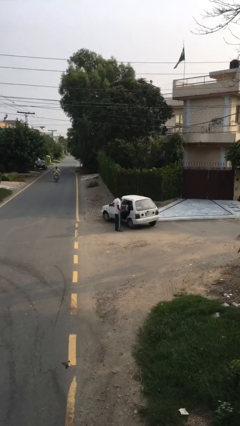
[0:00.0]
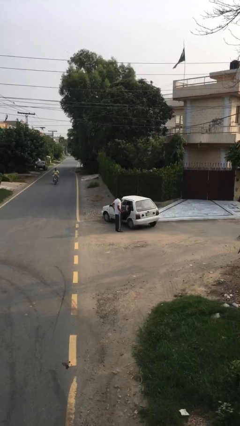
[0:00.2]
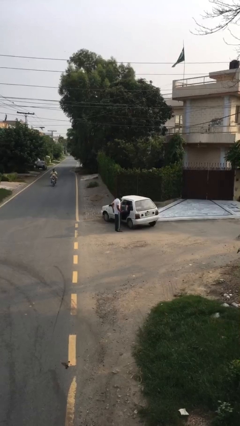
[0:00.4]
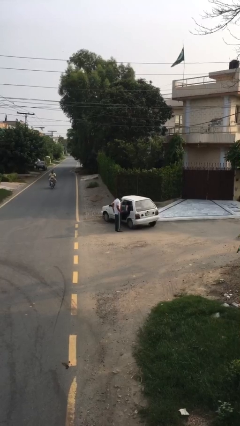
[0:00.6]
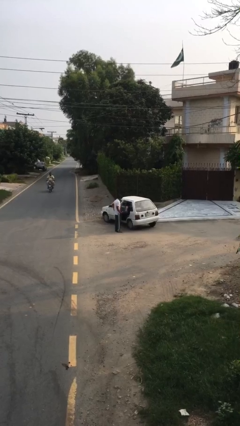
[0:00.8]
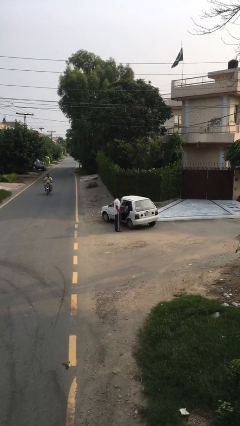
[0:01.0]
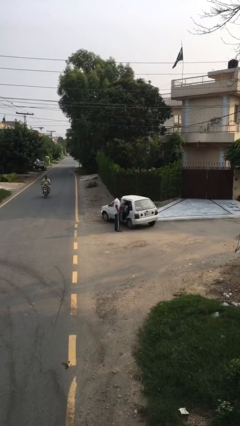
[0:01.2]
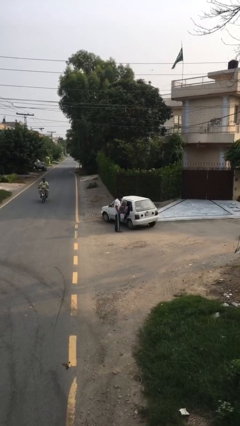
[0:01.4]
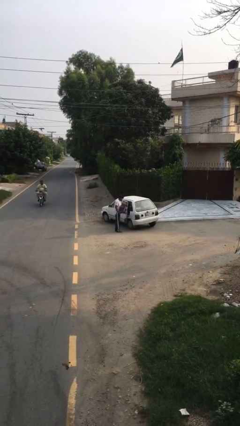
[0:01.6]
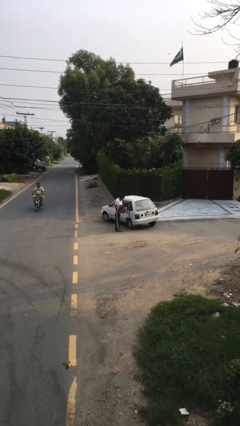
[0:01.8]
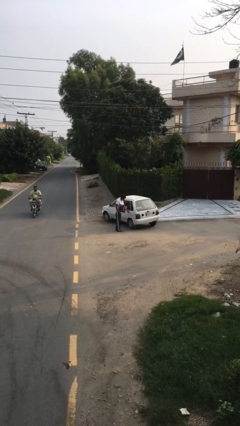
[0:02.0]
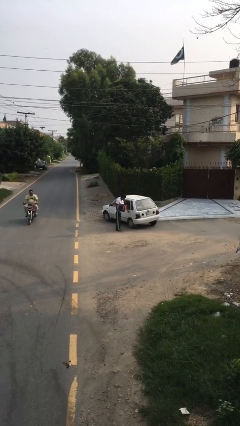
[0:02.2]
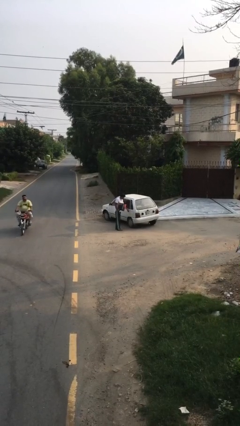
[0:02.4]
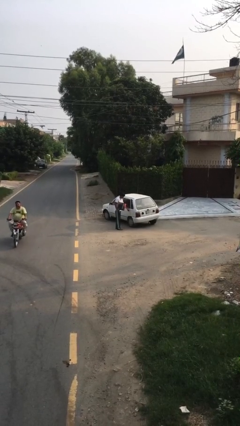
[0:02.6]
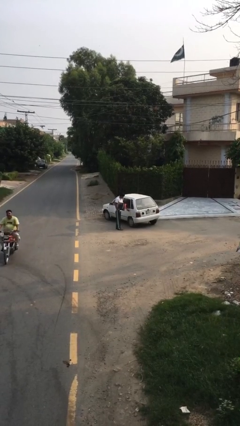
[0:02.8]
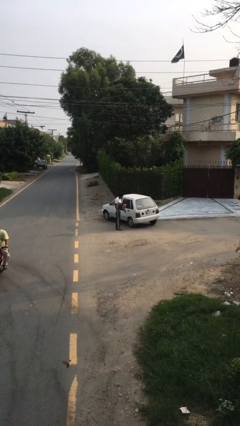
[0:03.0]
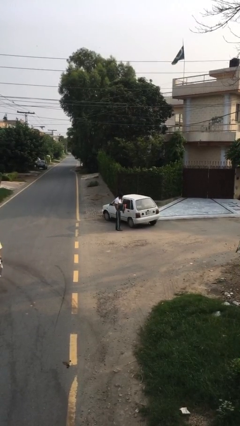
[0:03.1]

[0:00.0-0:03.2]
person closes car door

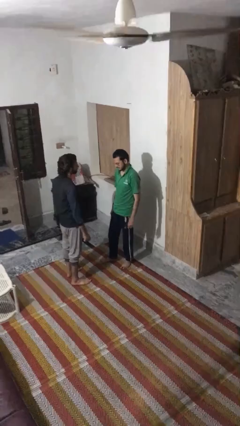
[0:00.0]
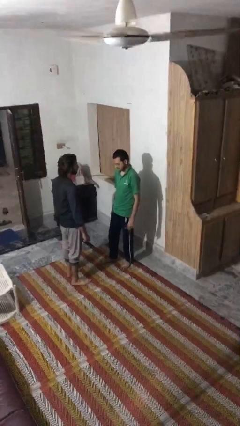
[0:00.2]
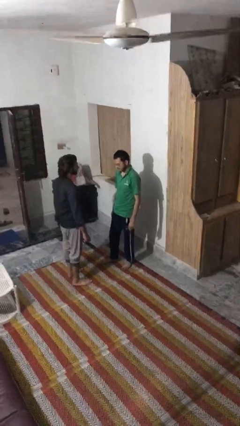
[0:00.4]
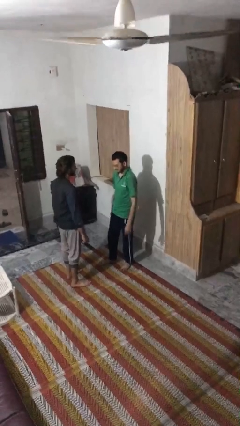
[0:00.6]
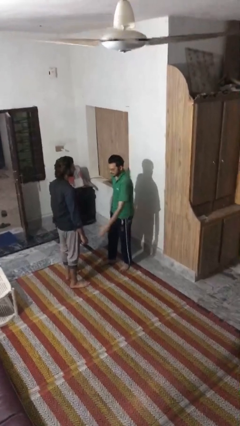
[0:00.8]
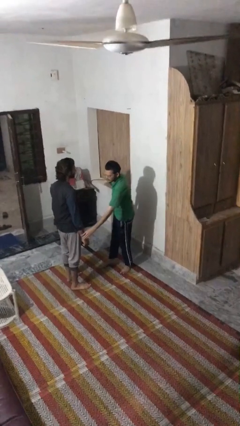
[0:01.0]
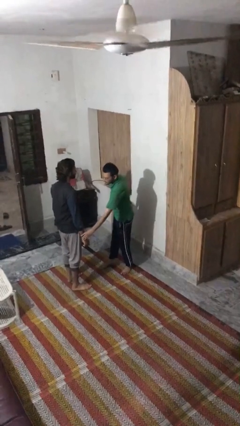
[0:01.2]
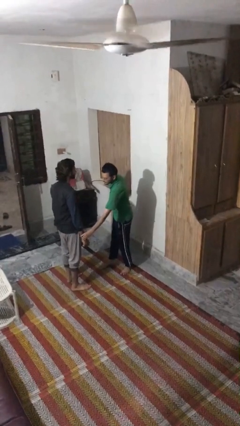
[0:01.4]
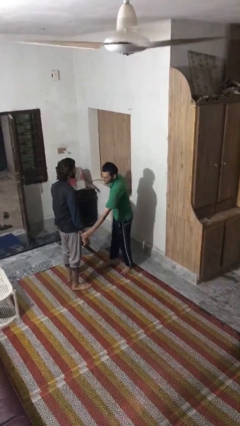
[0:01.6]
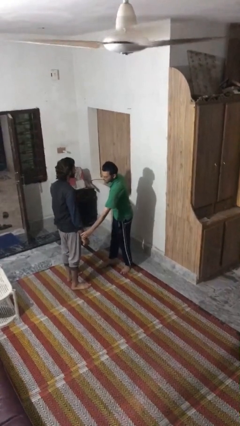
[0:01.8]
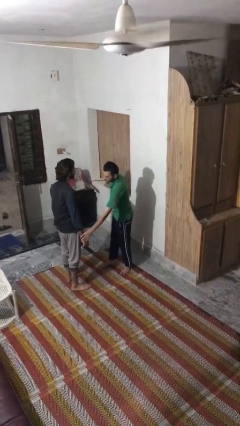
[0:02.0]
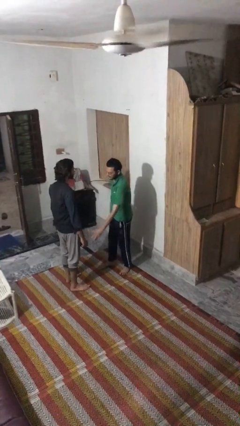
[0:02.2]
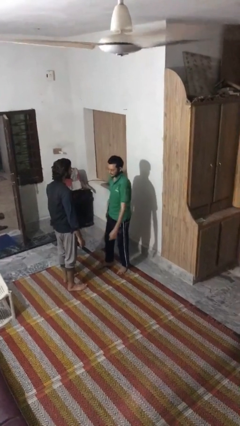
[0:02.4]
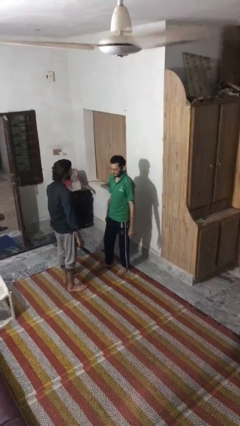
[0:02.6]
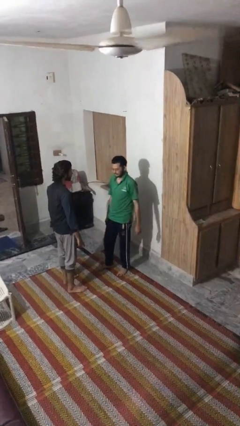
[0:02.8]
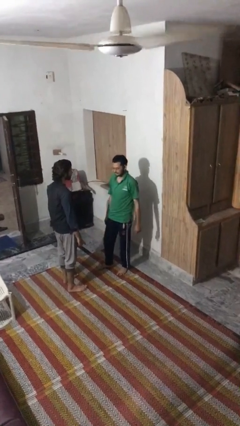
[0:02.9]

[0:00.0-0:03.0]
person grabs person by forearm

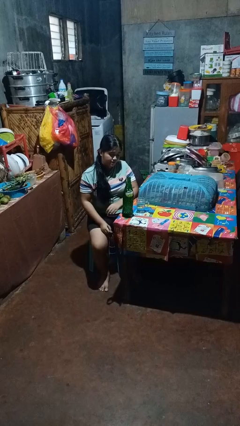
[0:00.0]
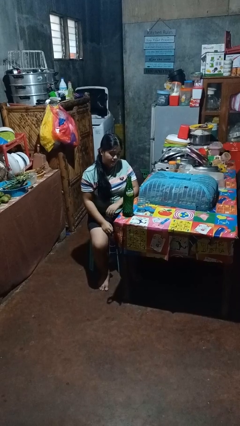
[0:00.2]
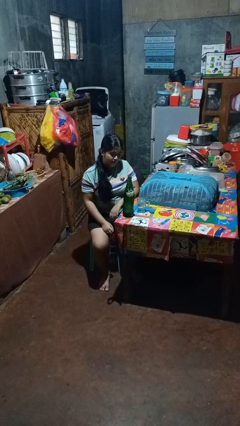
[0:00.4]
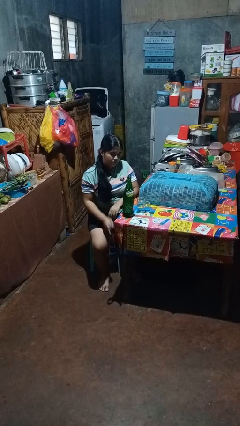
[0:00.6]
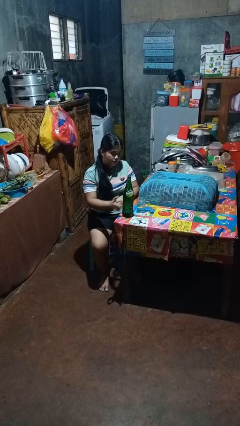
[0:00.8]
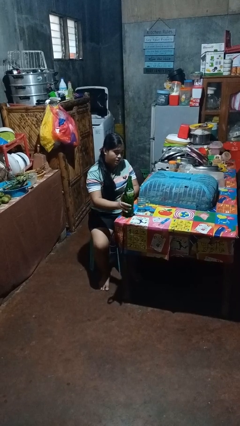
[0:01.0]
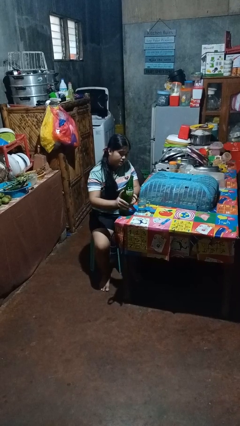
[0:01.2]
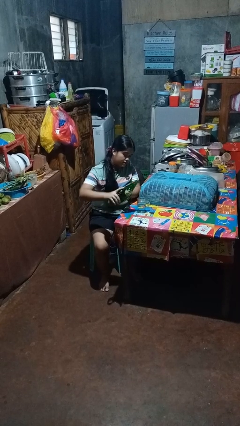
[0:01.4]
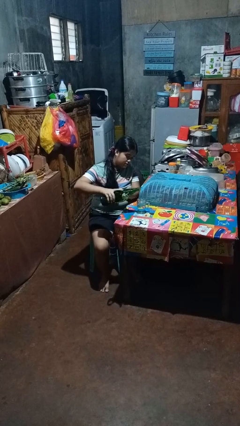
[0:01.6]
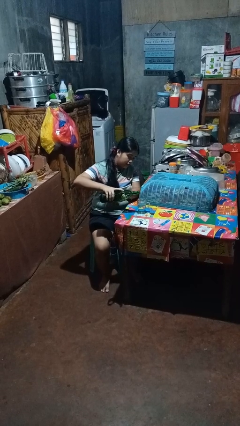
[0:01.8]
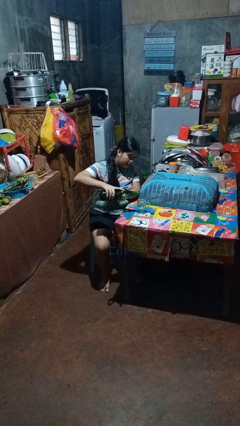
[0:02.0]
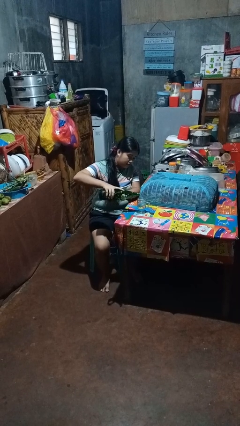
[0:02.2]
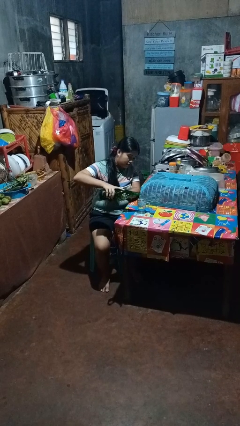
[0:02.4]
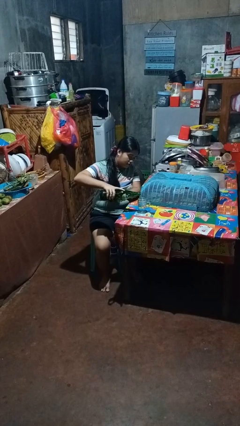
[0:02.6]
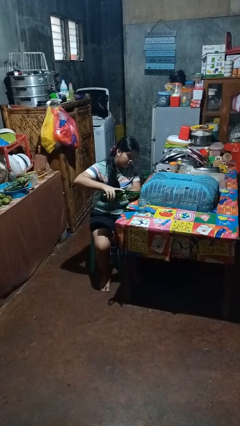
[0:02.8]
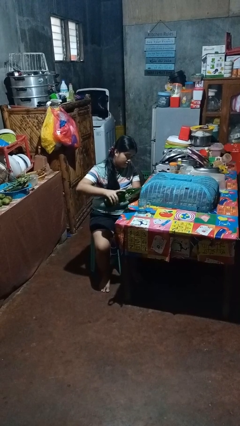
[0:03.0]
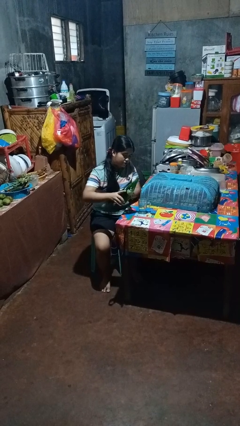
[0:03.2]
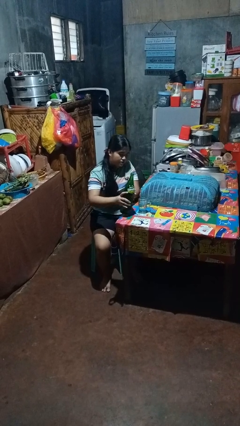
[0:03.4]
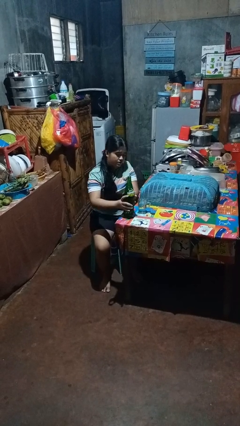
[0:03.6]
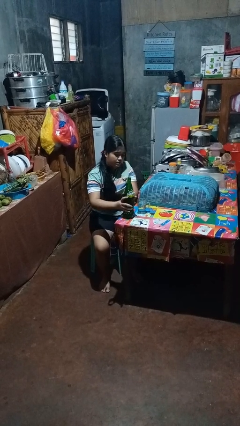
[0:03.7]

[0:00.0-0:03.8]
person pours liquid into cup

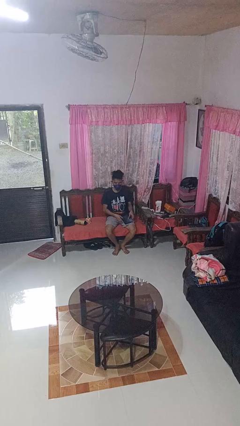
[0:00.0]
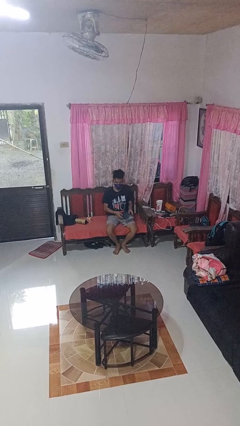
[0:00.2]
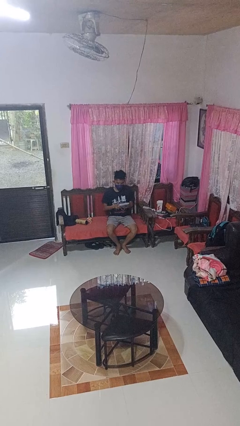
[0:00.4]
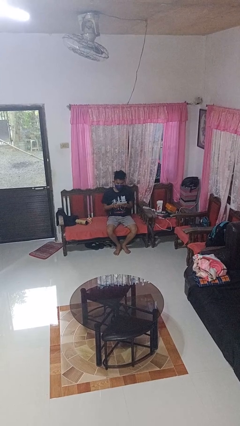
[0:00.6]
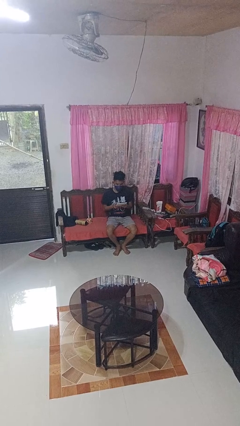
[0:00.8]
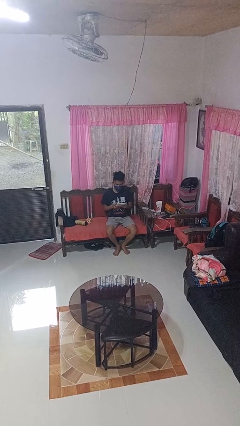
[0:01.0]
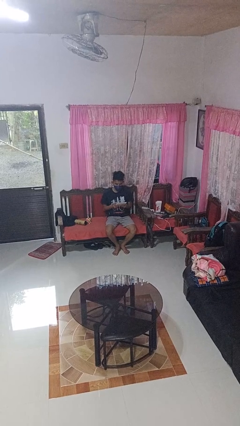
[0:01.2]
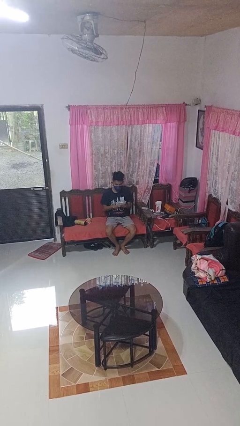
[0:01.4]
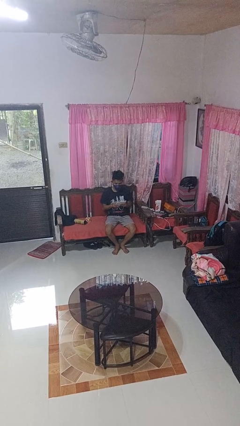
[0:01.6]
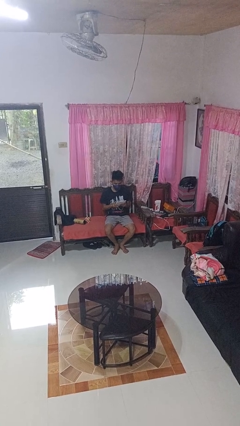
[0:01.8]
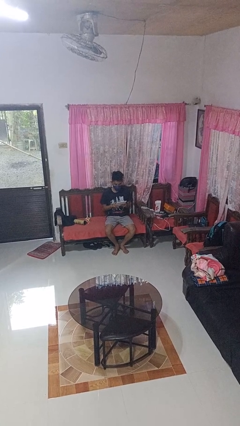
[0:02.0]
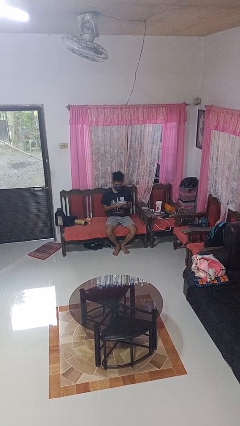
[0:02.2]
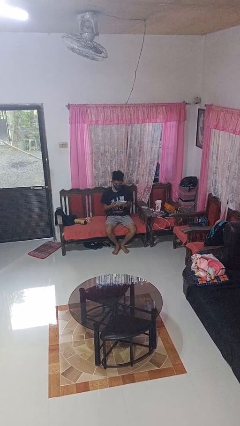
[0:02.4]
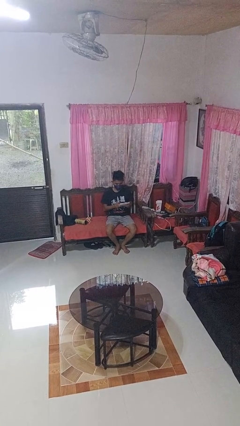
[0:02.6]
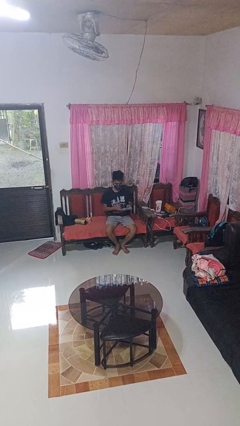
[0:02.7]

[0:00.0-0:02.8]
person interacts with tablet

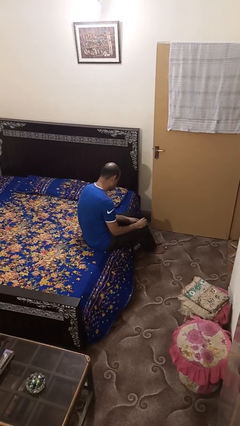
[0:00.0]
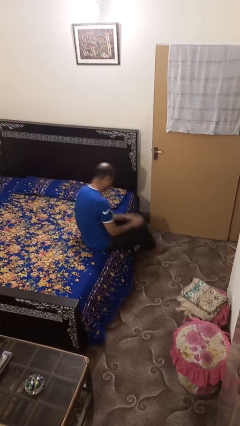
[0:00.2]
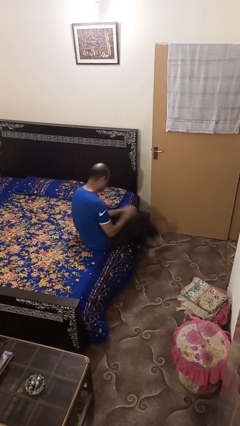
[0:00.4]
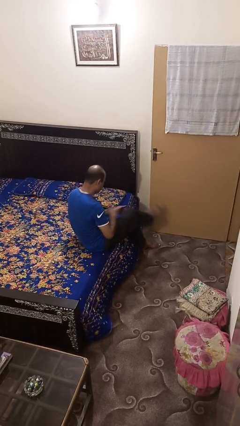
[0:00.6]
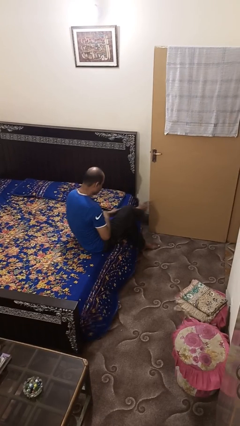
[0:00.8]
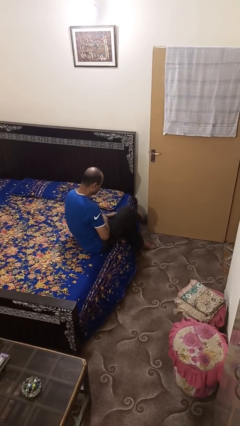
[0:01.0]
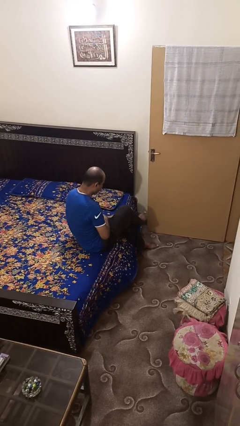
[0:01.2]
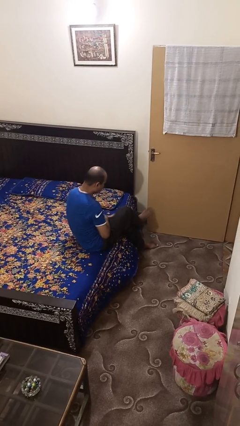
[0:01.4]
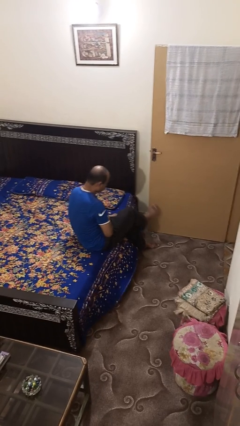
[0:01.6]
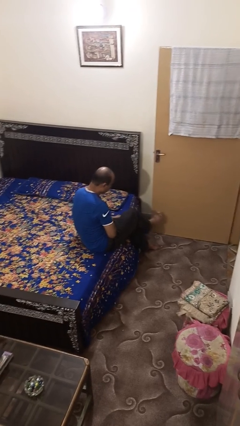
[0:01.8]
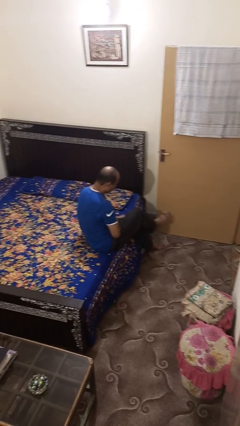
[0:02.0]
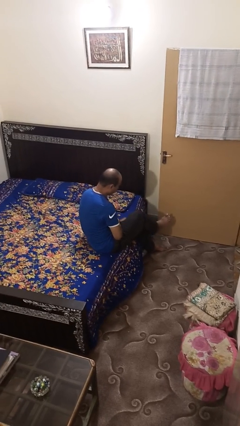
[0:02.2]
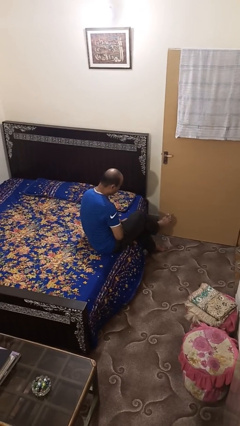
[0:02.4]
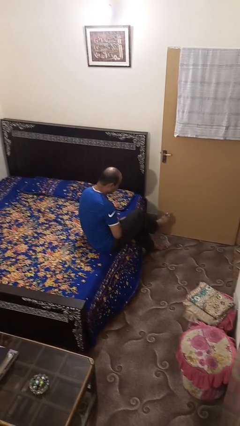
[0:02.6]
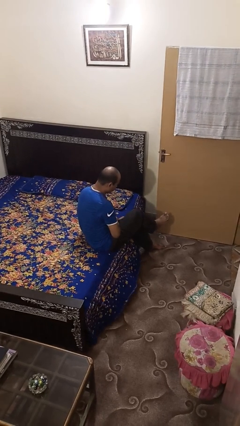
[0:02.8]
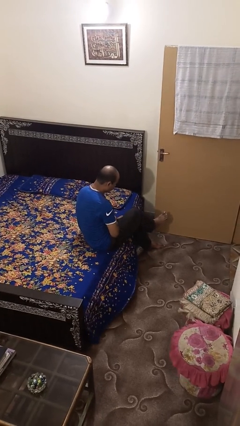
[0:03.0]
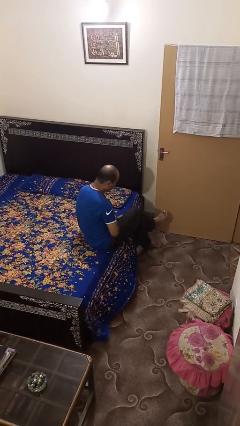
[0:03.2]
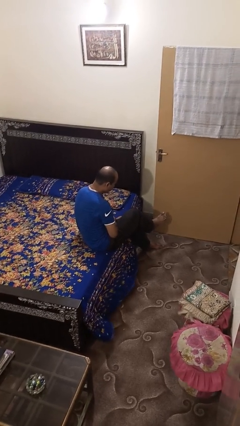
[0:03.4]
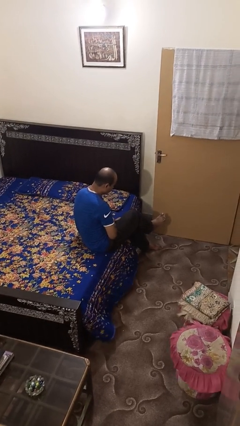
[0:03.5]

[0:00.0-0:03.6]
person crosses legs

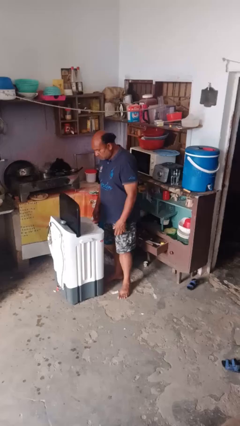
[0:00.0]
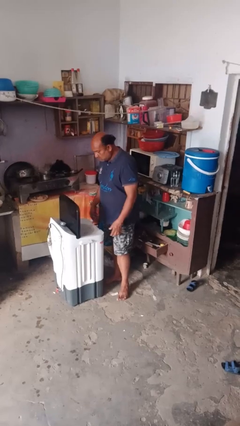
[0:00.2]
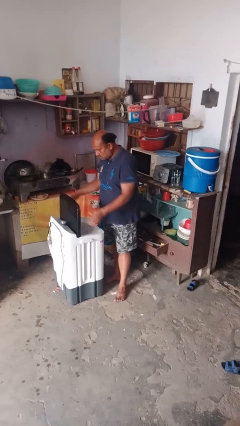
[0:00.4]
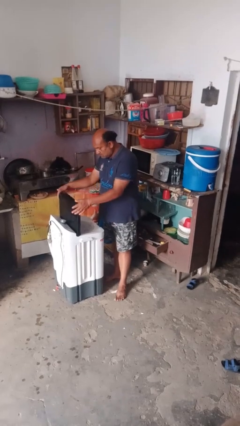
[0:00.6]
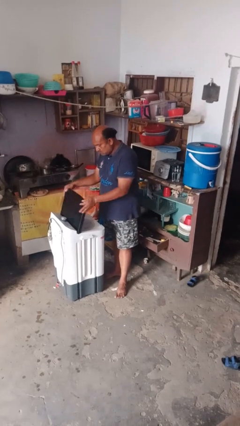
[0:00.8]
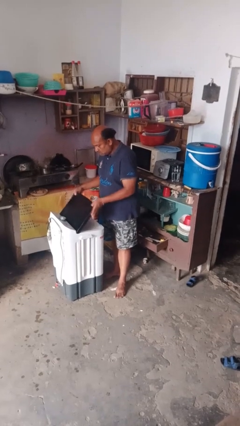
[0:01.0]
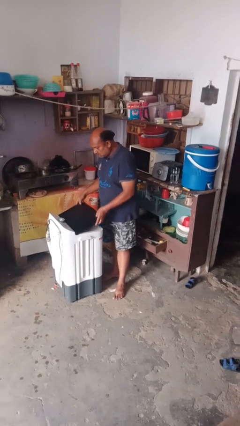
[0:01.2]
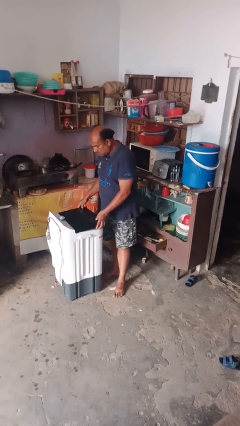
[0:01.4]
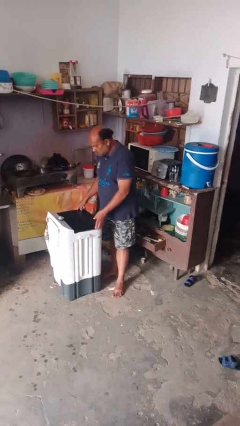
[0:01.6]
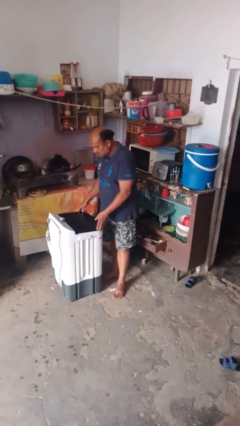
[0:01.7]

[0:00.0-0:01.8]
person closes clothes washer
